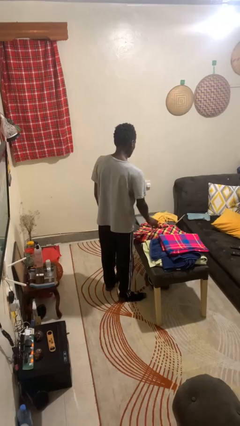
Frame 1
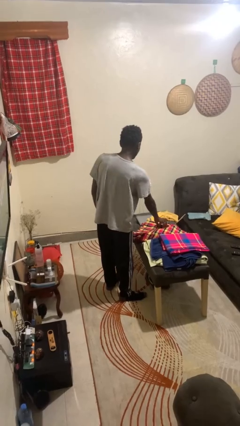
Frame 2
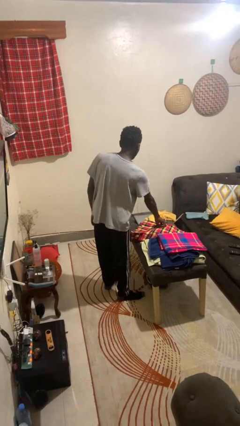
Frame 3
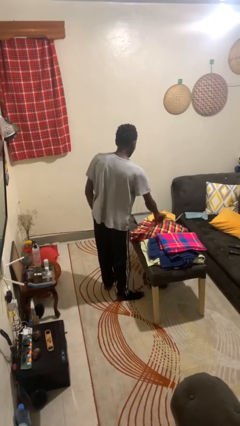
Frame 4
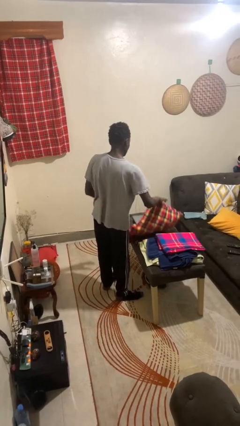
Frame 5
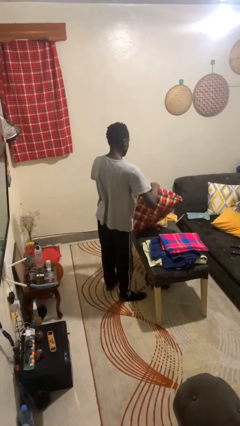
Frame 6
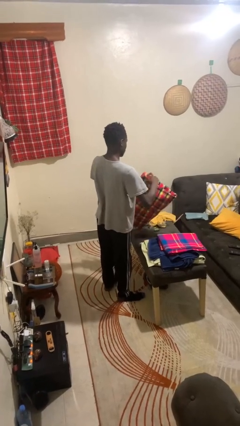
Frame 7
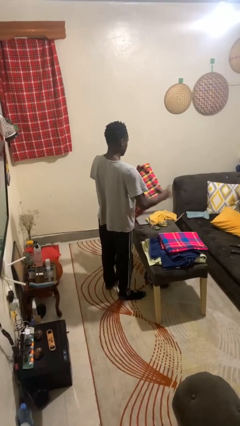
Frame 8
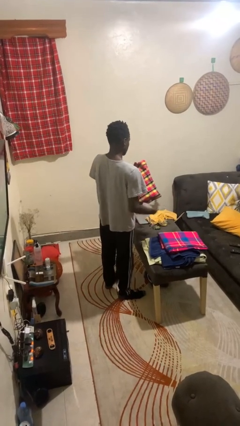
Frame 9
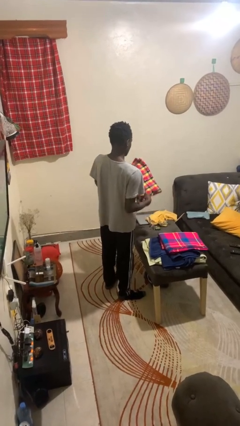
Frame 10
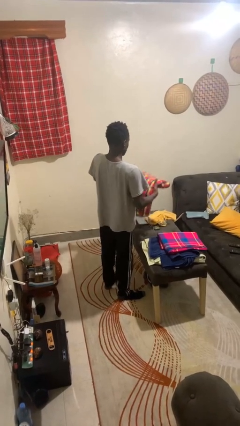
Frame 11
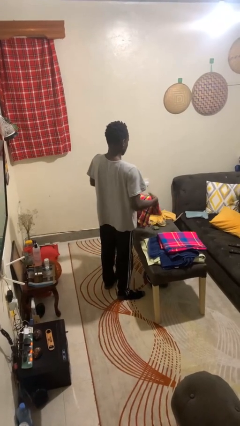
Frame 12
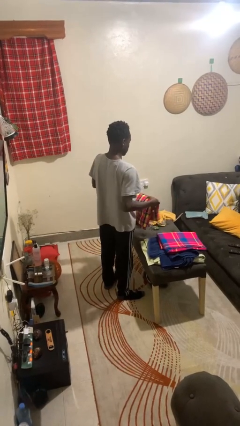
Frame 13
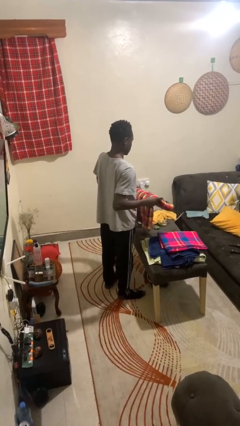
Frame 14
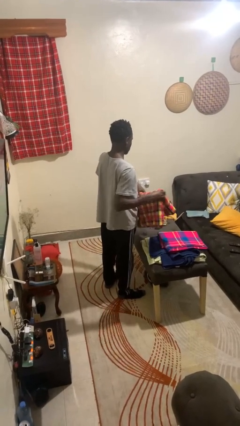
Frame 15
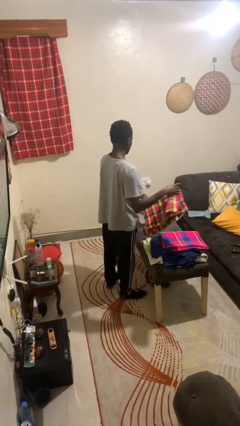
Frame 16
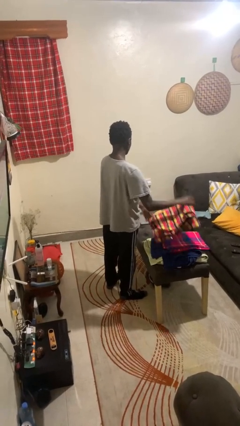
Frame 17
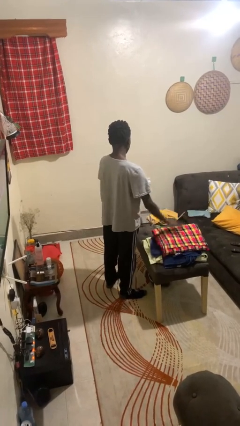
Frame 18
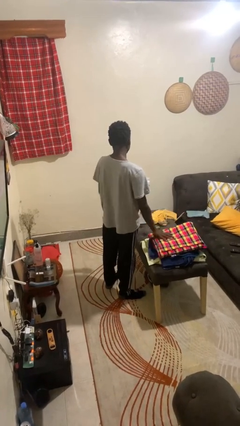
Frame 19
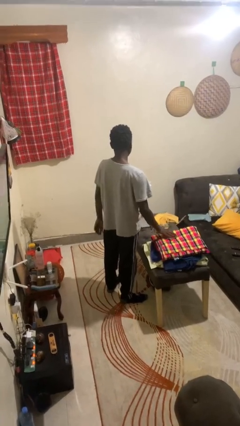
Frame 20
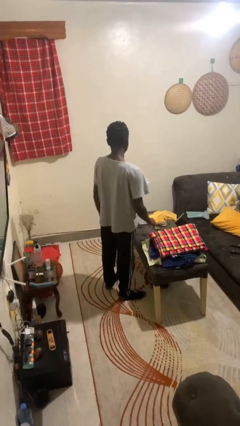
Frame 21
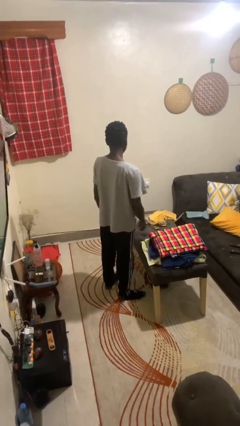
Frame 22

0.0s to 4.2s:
person folds towel

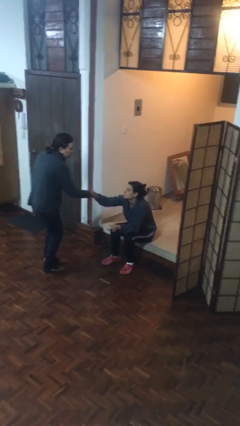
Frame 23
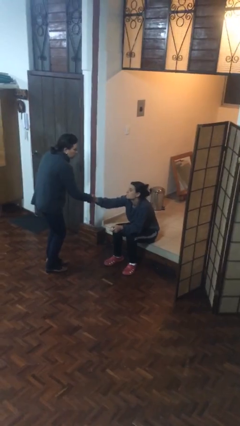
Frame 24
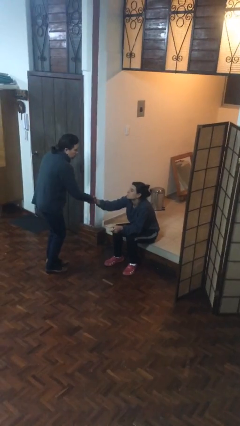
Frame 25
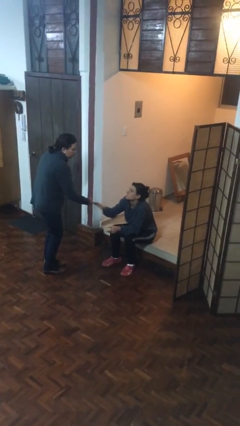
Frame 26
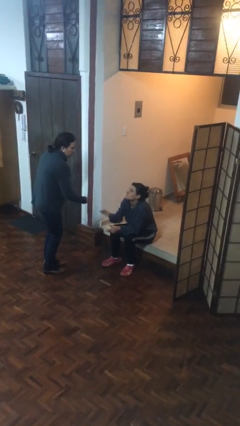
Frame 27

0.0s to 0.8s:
person shakes hand

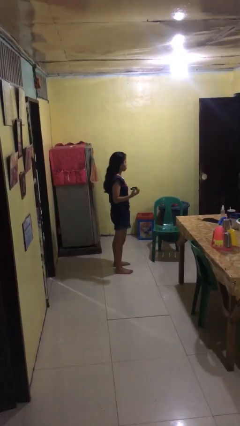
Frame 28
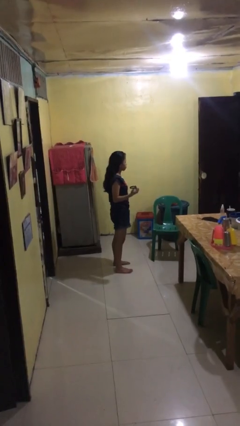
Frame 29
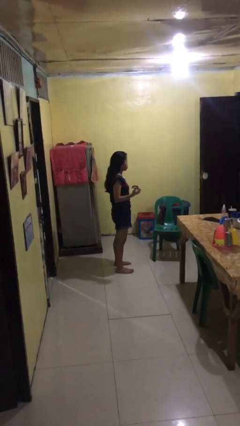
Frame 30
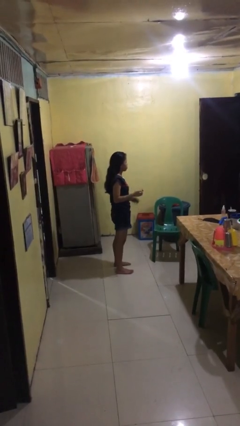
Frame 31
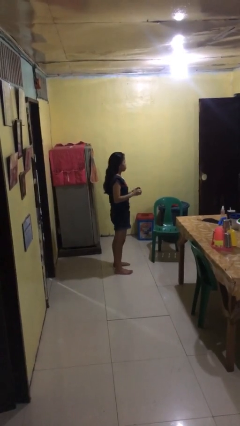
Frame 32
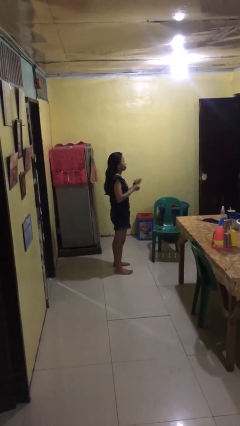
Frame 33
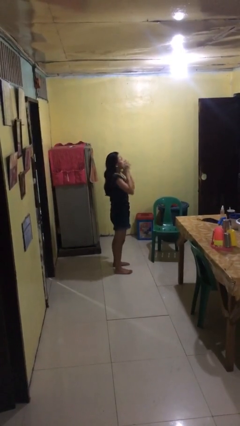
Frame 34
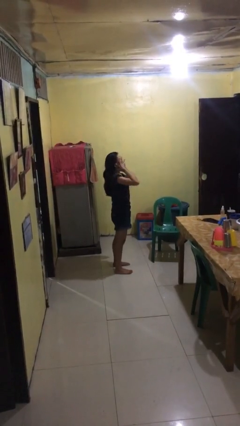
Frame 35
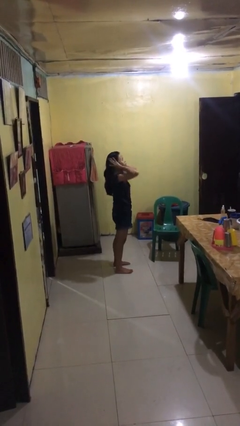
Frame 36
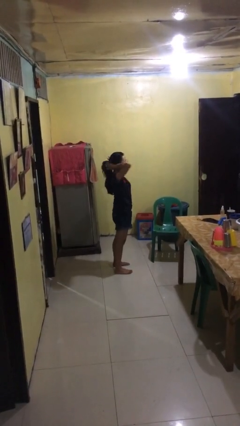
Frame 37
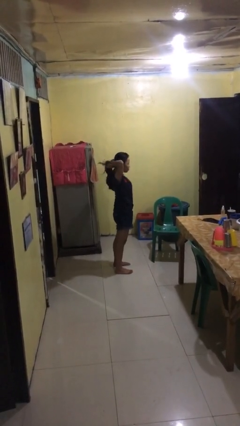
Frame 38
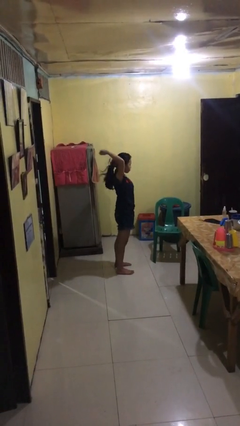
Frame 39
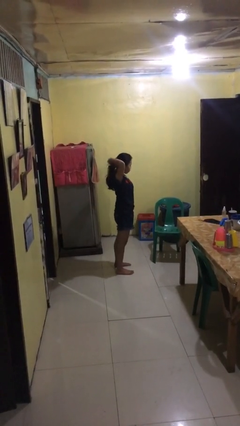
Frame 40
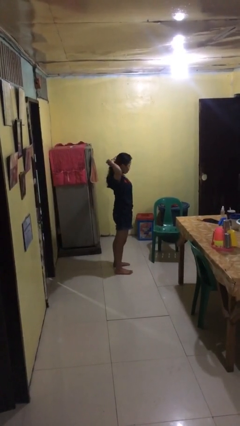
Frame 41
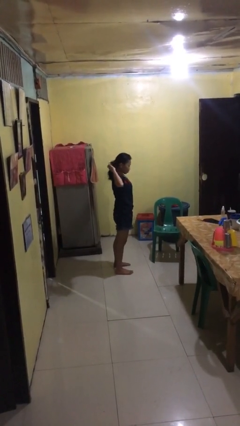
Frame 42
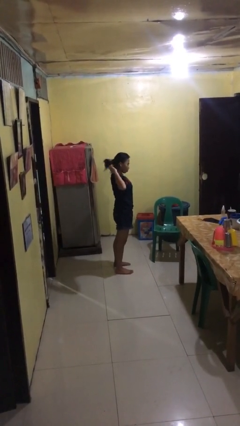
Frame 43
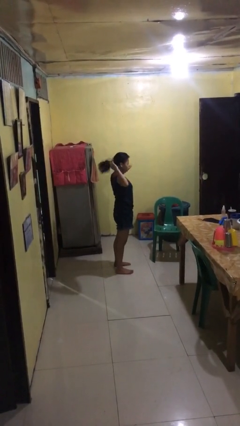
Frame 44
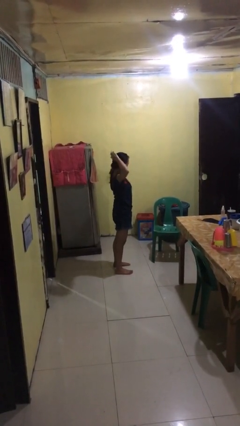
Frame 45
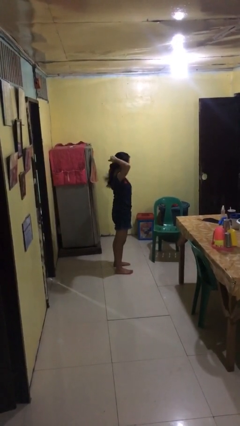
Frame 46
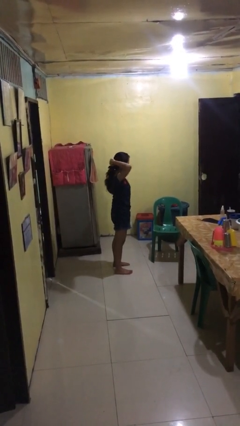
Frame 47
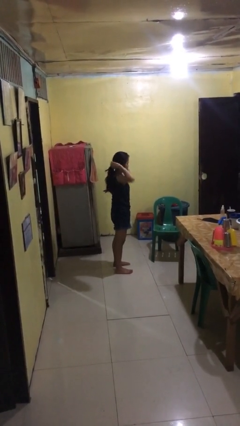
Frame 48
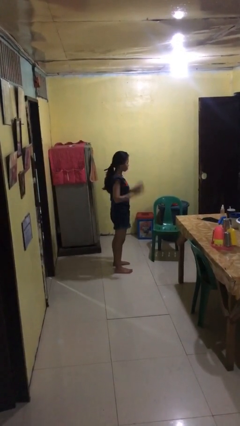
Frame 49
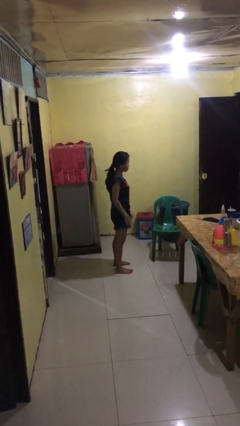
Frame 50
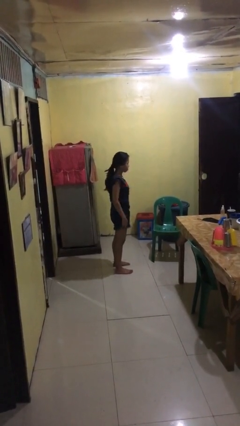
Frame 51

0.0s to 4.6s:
person puts hair in ponytail

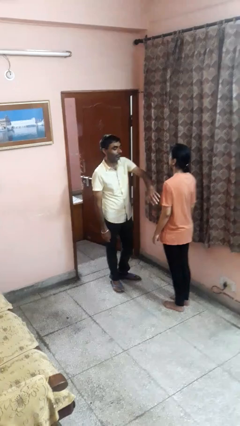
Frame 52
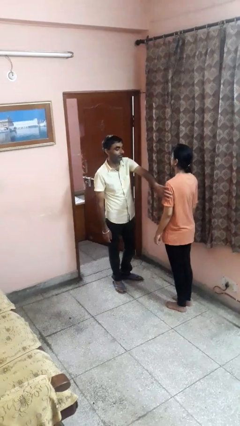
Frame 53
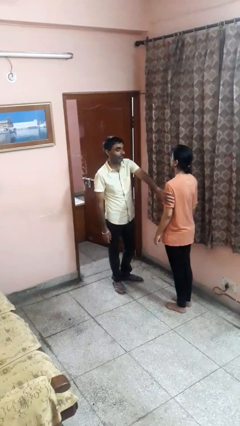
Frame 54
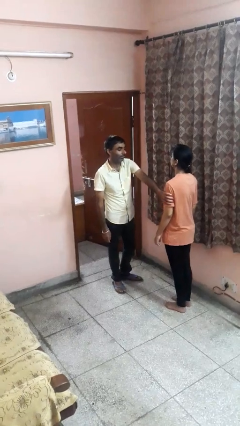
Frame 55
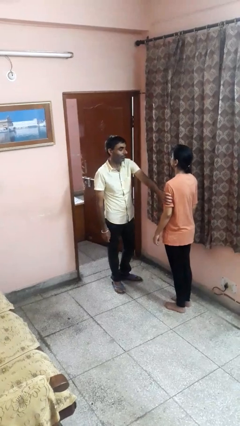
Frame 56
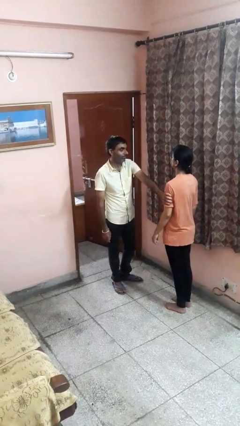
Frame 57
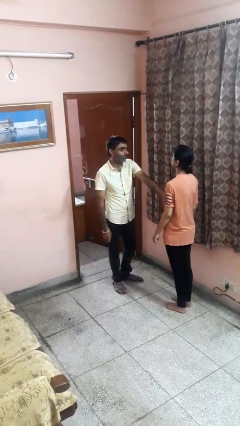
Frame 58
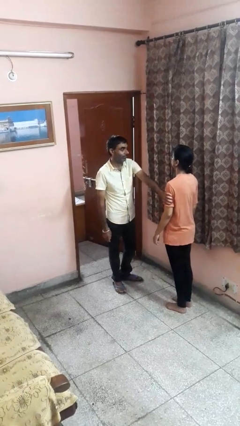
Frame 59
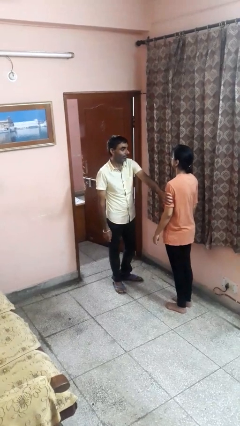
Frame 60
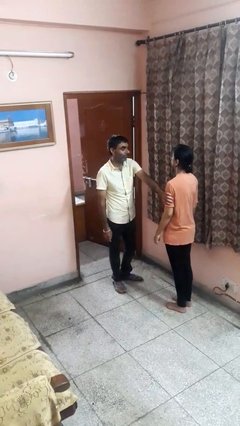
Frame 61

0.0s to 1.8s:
person grabs person by bicep

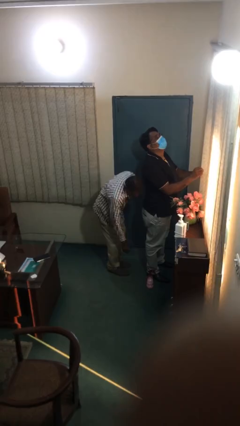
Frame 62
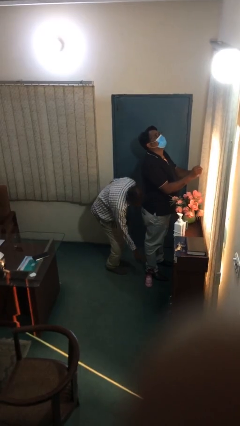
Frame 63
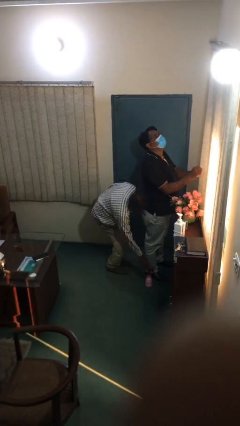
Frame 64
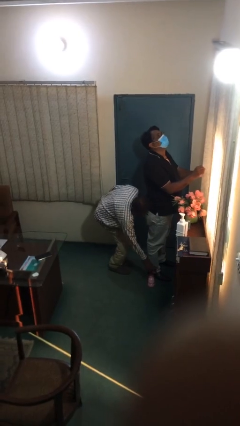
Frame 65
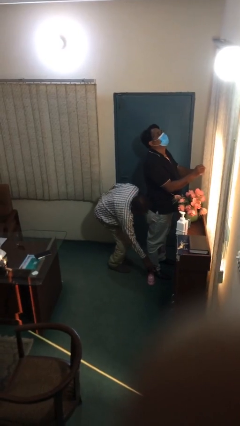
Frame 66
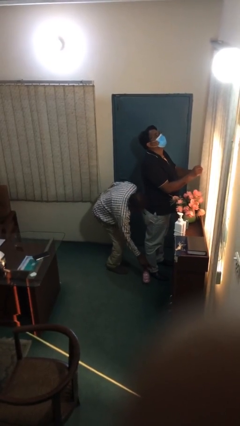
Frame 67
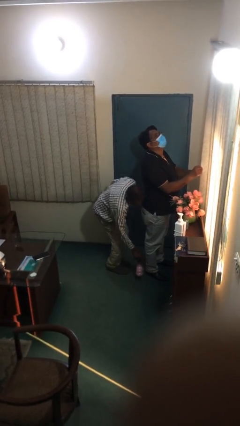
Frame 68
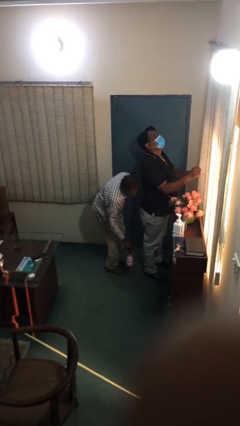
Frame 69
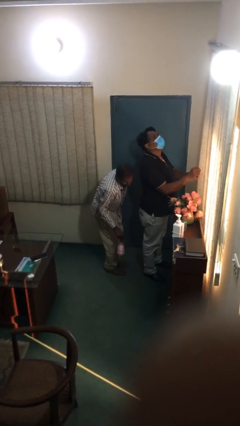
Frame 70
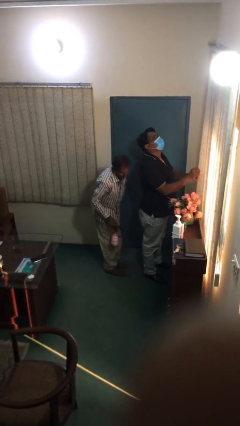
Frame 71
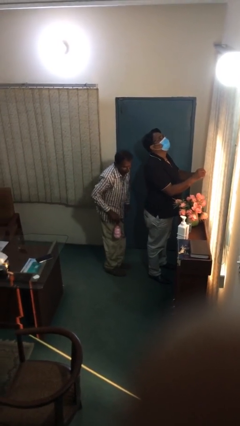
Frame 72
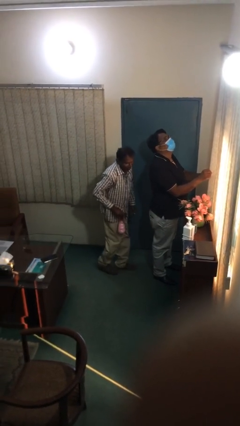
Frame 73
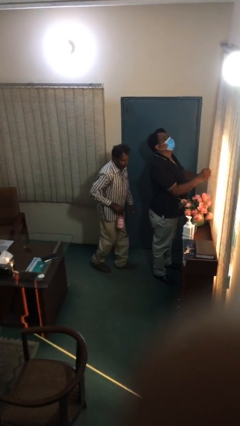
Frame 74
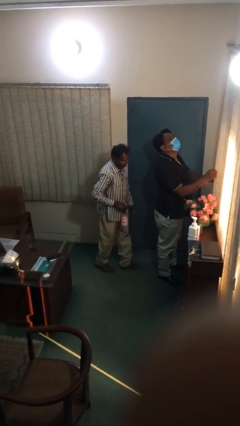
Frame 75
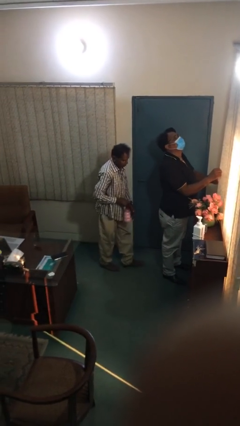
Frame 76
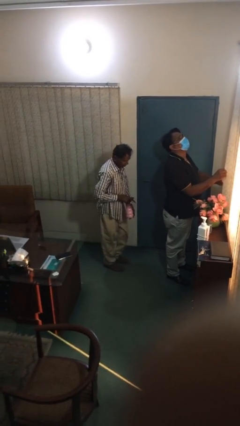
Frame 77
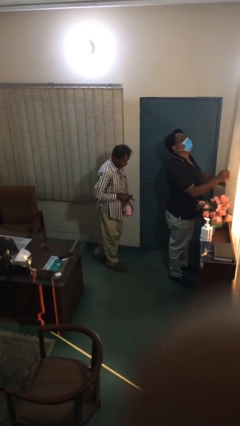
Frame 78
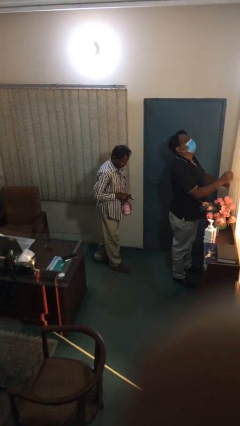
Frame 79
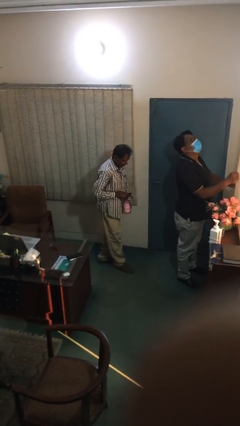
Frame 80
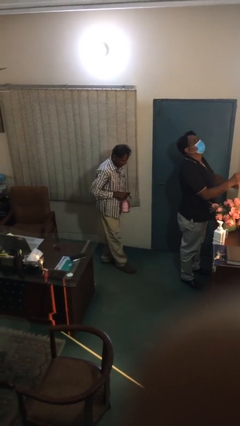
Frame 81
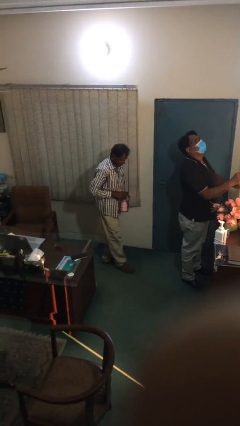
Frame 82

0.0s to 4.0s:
person steals object from person

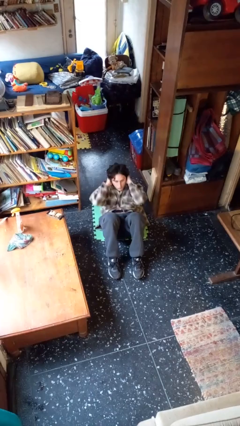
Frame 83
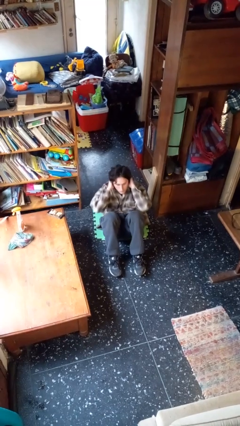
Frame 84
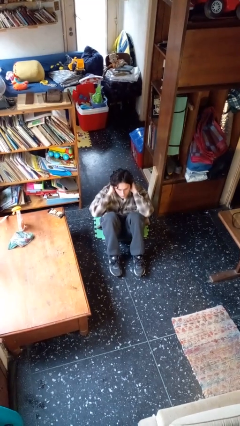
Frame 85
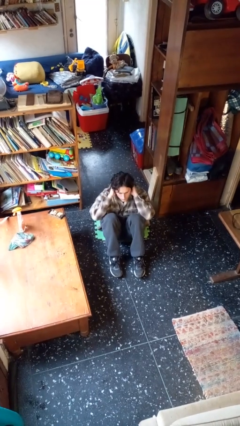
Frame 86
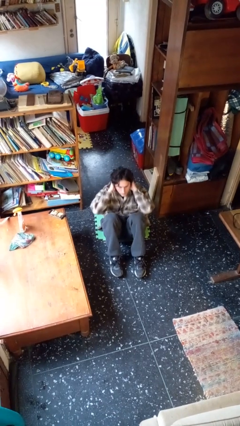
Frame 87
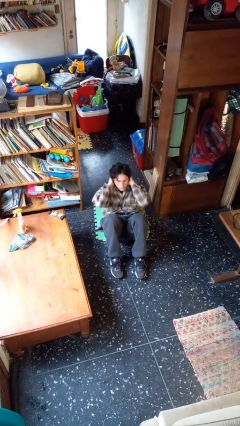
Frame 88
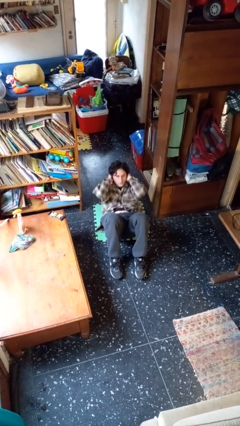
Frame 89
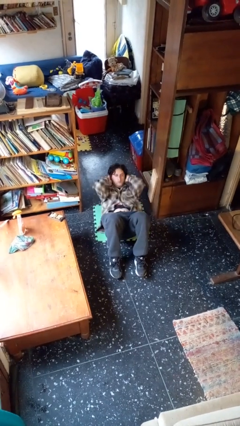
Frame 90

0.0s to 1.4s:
person exercises with situp

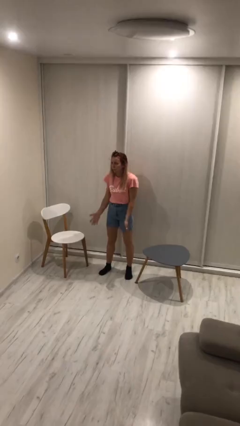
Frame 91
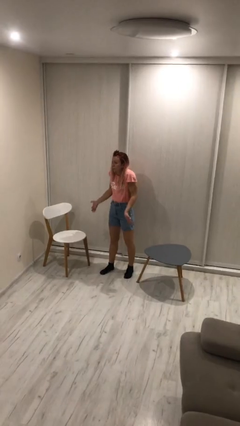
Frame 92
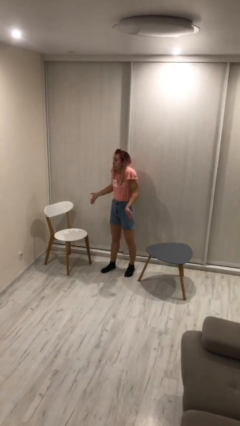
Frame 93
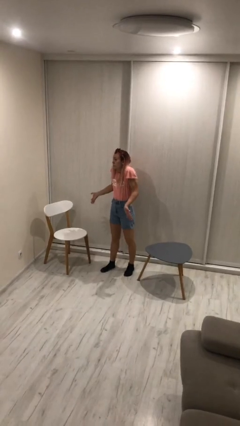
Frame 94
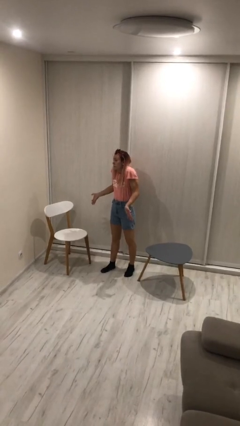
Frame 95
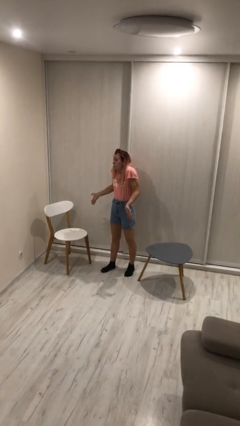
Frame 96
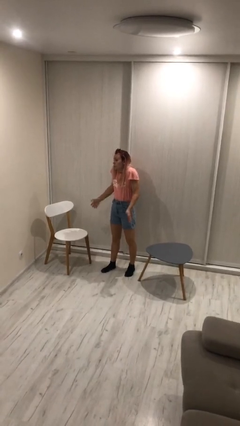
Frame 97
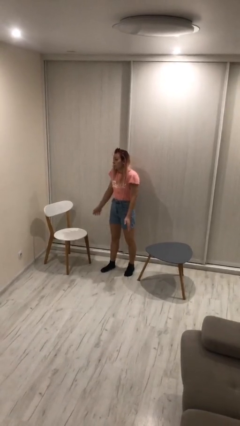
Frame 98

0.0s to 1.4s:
person shrugs
